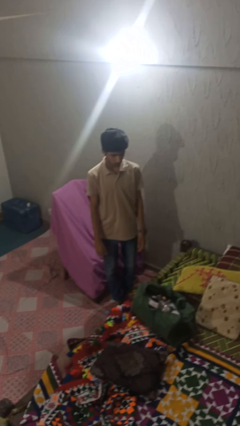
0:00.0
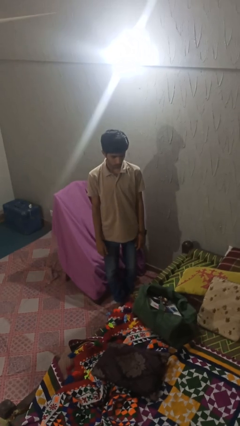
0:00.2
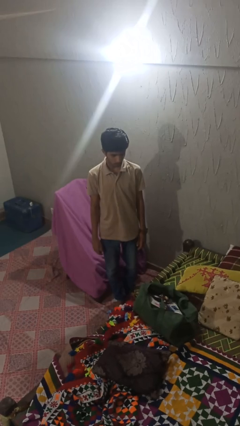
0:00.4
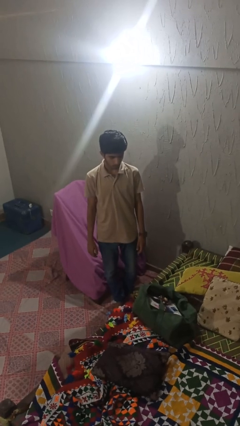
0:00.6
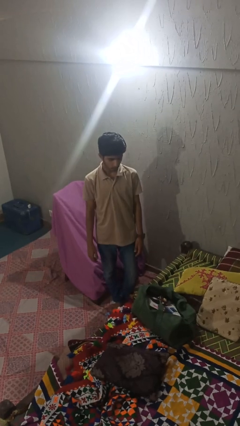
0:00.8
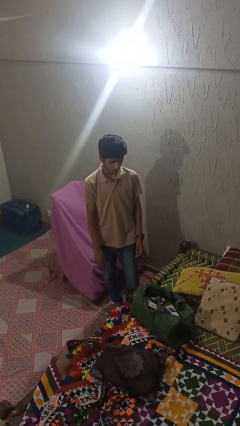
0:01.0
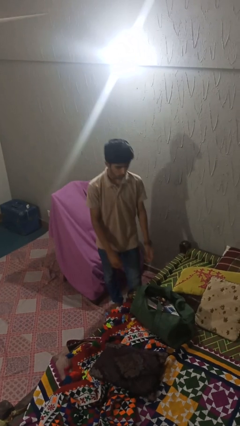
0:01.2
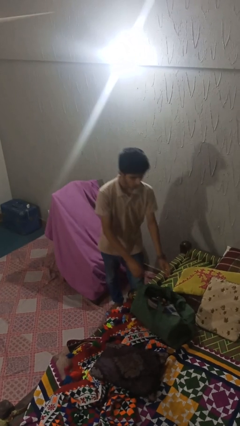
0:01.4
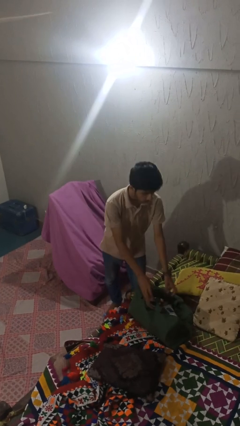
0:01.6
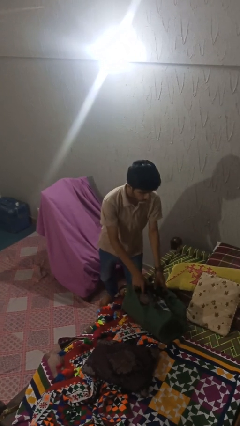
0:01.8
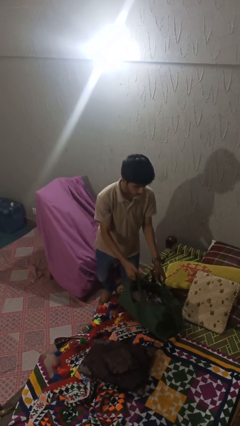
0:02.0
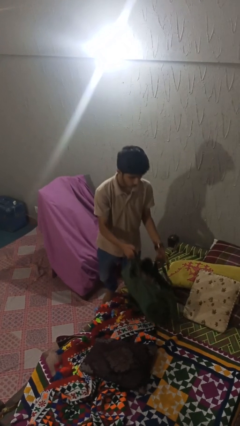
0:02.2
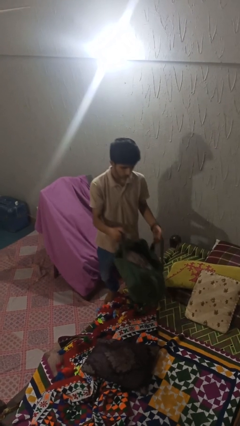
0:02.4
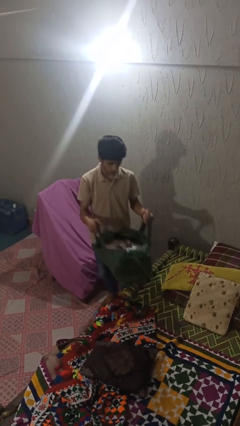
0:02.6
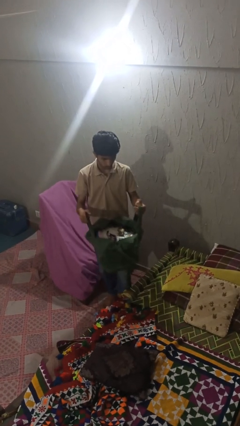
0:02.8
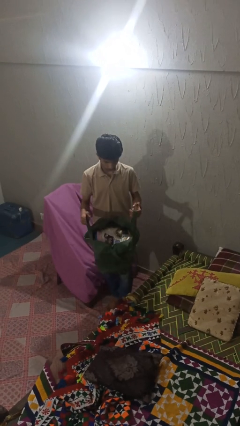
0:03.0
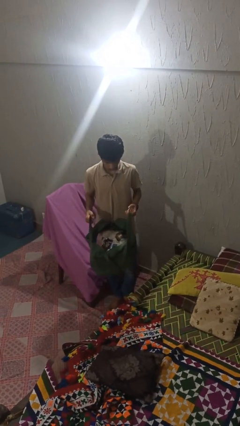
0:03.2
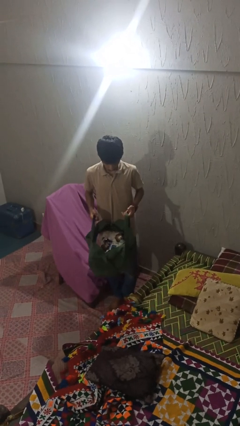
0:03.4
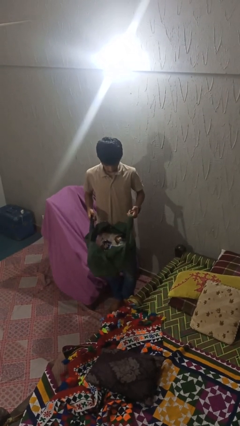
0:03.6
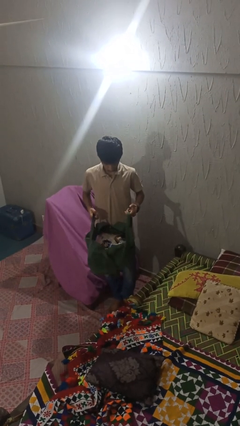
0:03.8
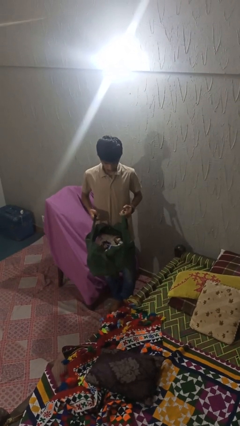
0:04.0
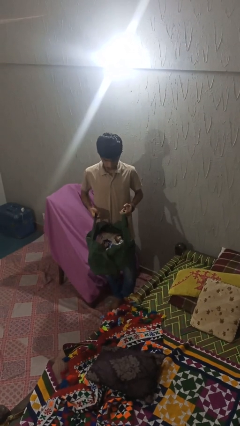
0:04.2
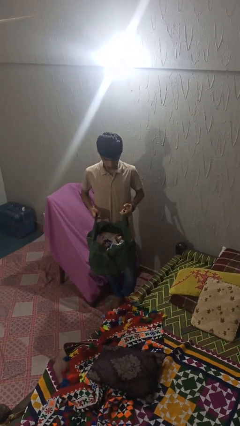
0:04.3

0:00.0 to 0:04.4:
person picks up object from bed

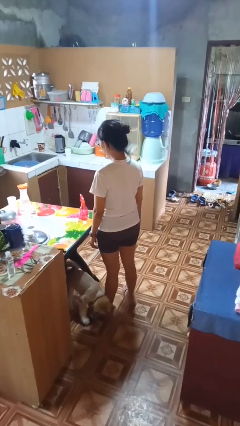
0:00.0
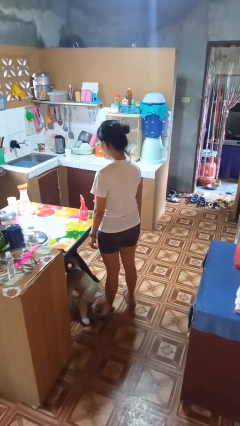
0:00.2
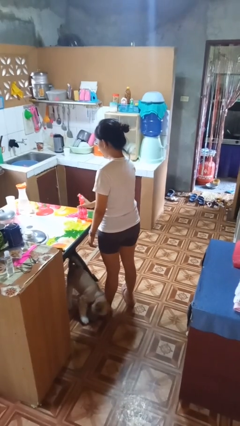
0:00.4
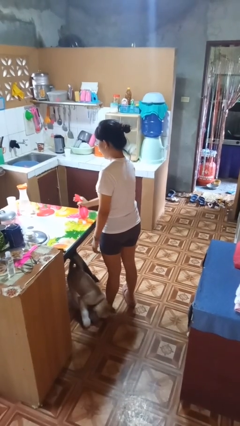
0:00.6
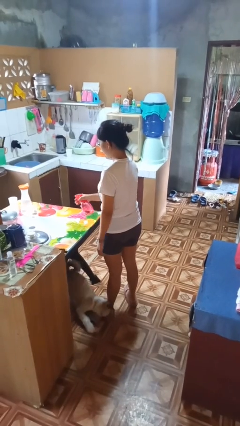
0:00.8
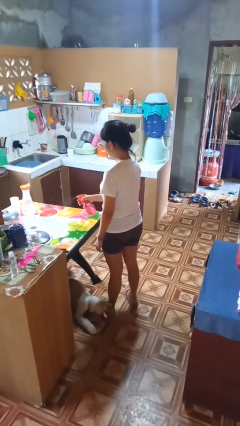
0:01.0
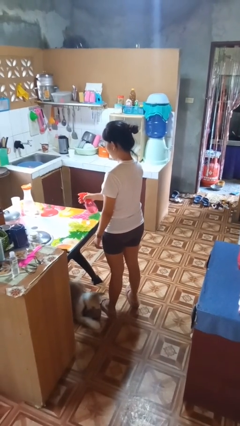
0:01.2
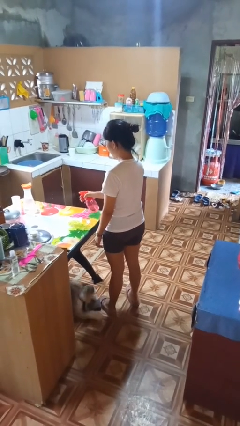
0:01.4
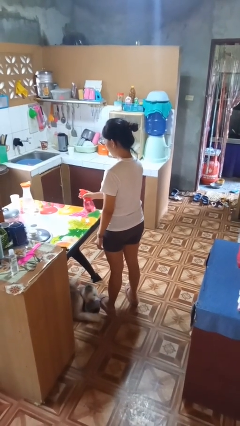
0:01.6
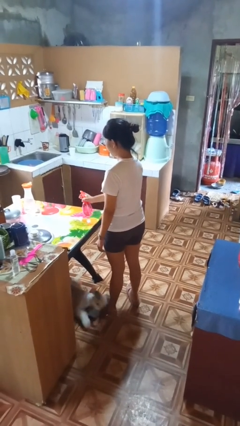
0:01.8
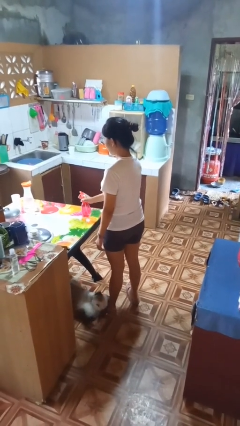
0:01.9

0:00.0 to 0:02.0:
person sprays from bottle

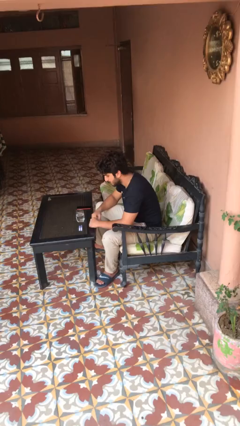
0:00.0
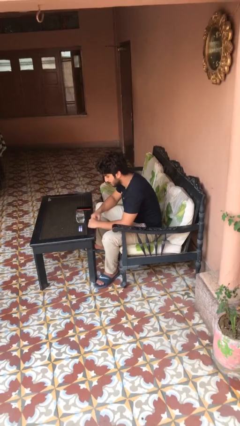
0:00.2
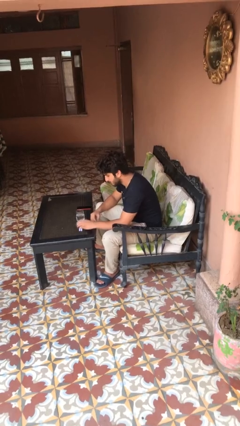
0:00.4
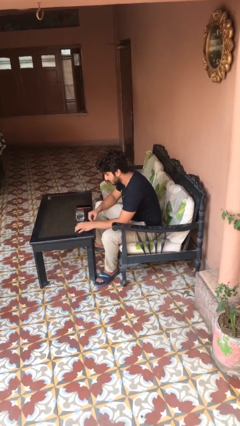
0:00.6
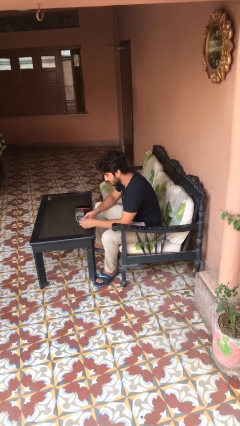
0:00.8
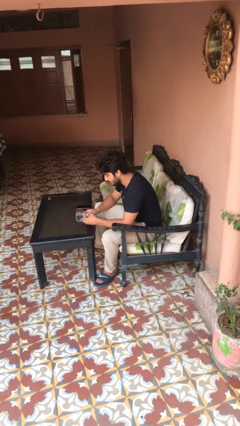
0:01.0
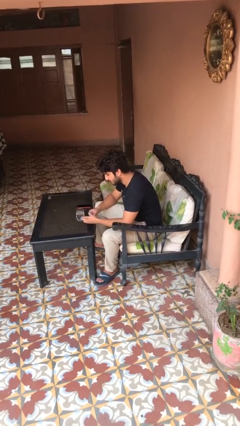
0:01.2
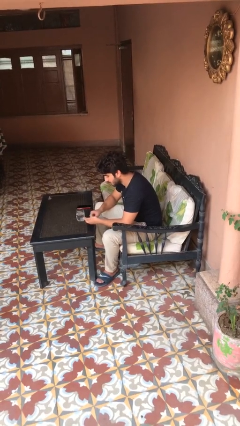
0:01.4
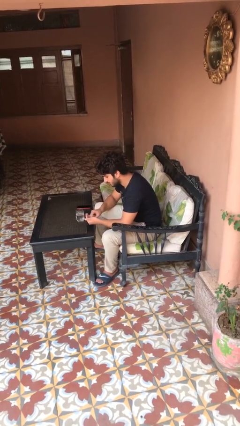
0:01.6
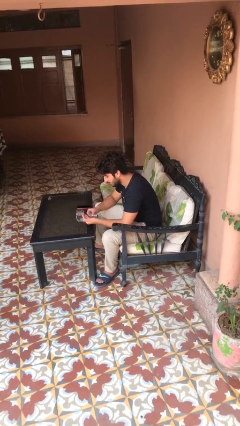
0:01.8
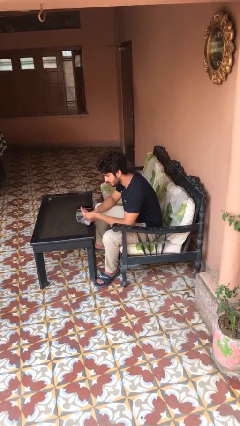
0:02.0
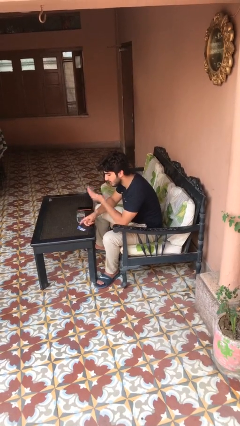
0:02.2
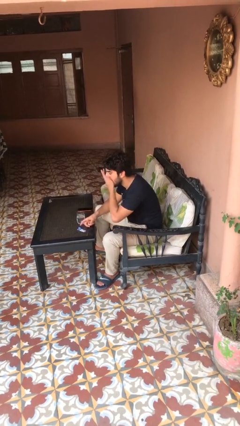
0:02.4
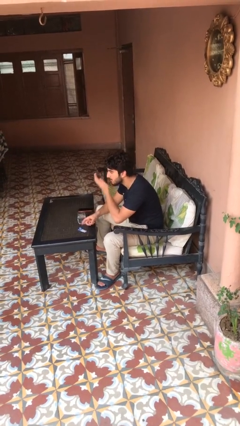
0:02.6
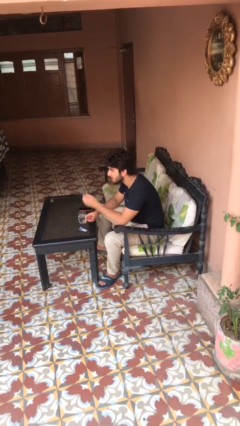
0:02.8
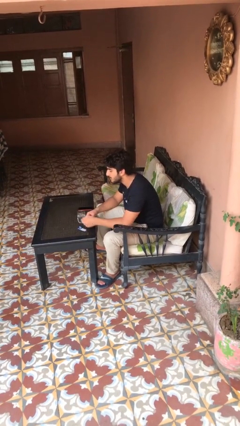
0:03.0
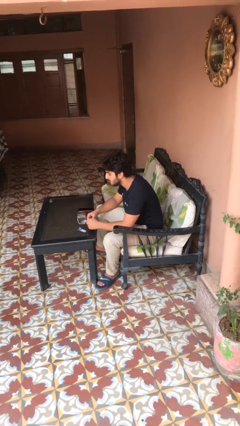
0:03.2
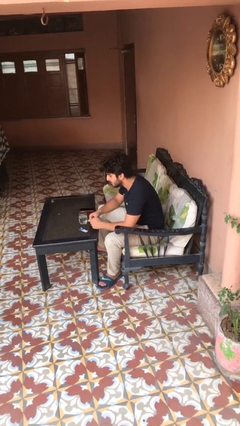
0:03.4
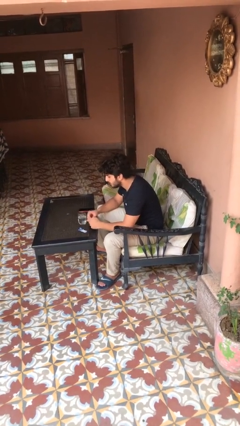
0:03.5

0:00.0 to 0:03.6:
person takes medicine pills

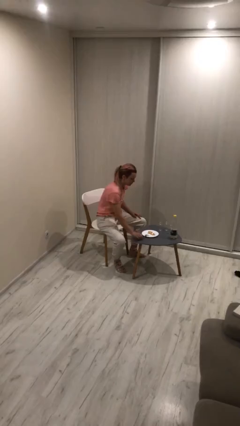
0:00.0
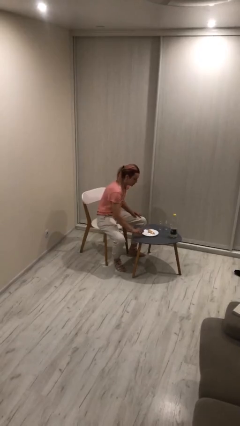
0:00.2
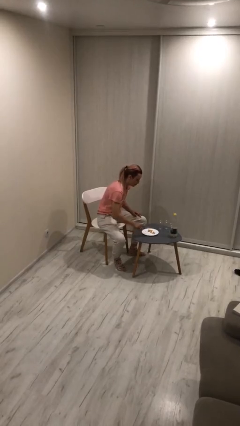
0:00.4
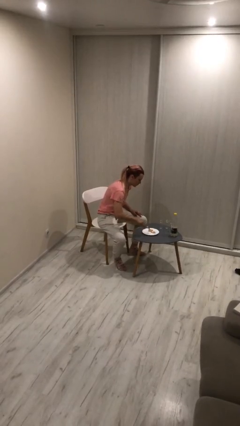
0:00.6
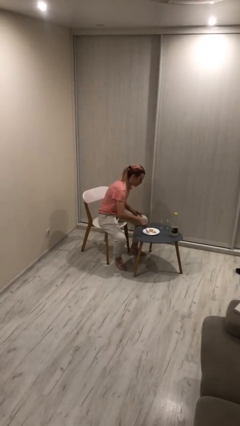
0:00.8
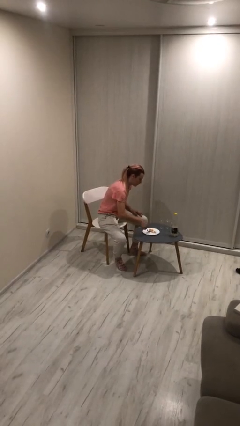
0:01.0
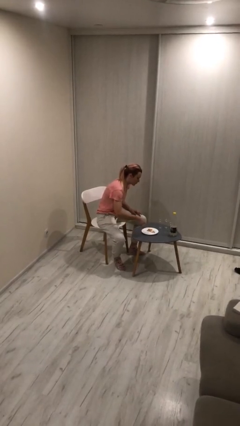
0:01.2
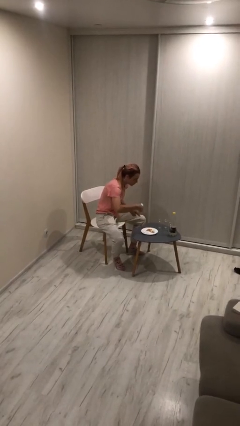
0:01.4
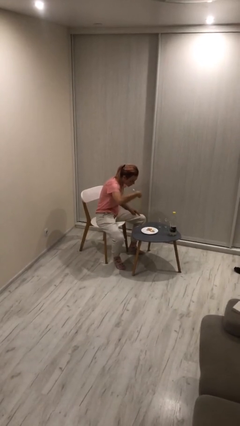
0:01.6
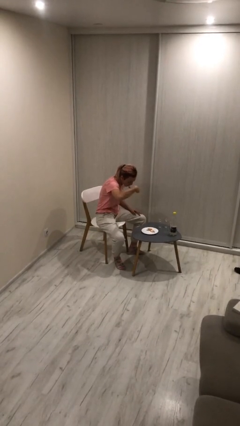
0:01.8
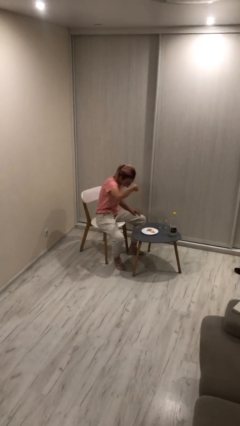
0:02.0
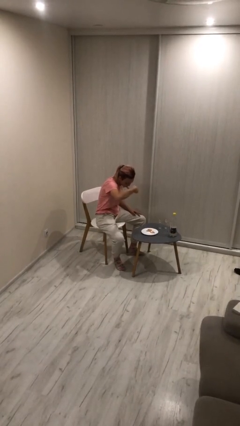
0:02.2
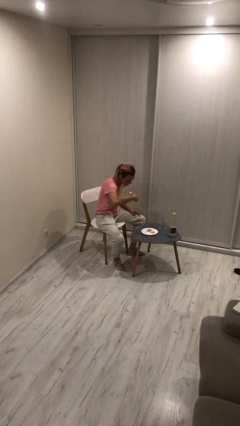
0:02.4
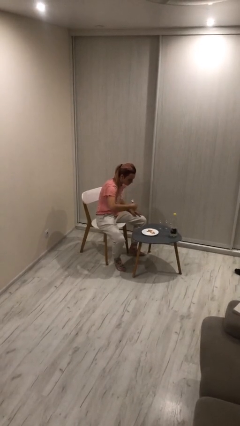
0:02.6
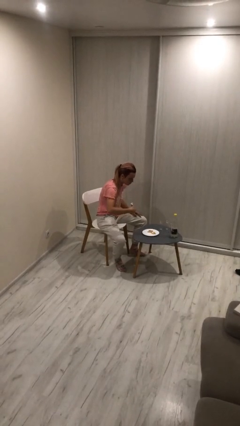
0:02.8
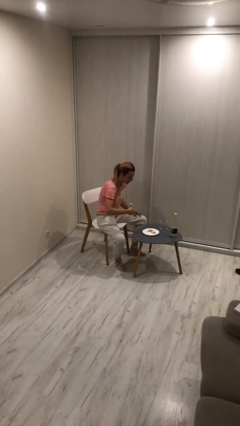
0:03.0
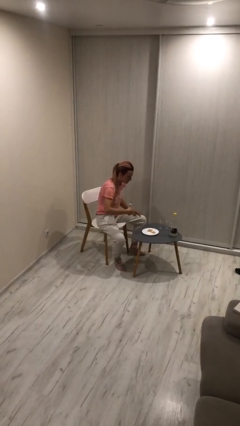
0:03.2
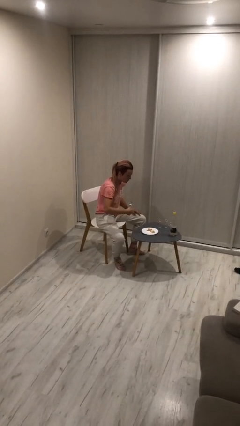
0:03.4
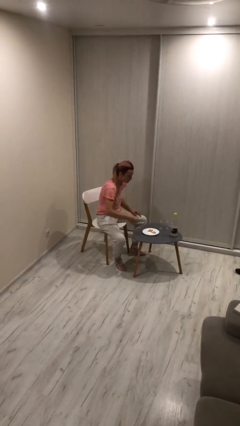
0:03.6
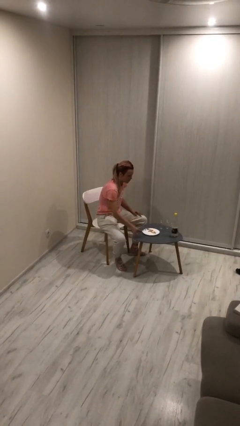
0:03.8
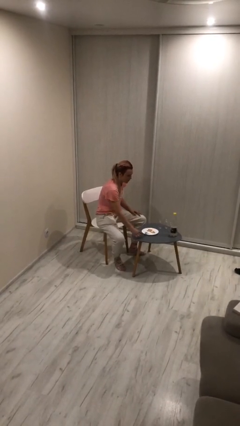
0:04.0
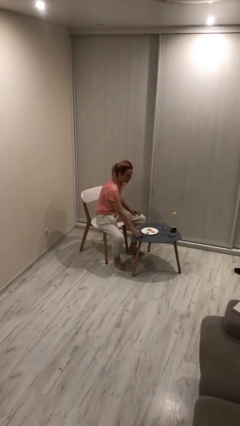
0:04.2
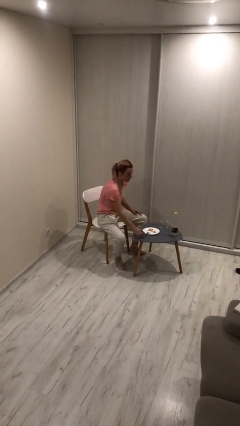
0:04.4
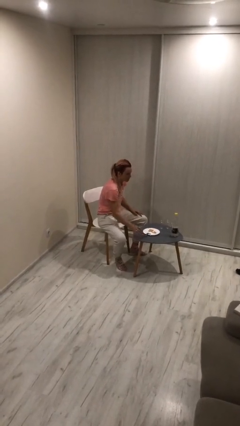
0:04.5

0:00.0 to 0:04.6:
person eats with utensil

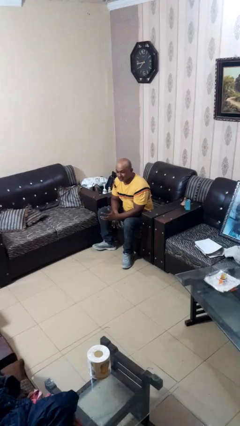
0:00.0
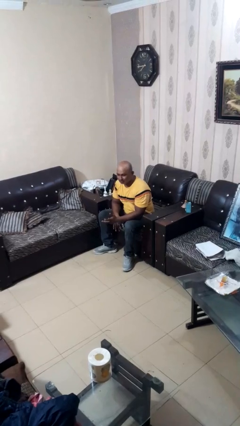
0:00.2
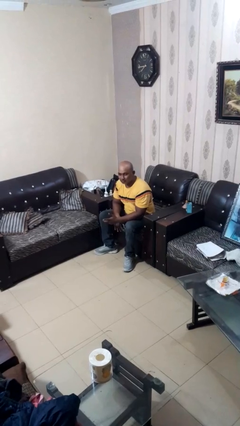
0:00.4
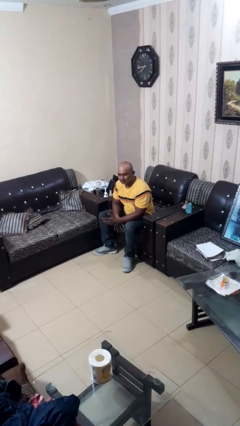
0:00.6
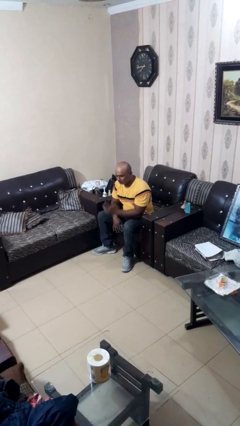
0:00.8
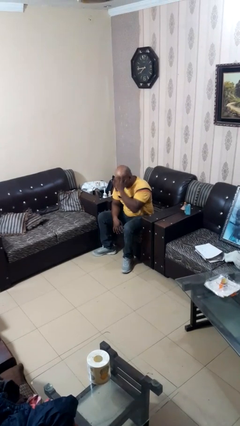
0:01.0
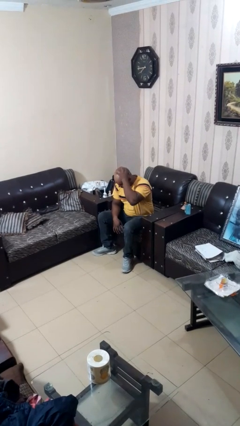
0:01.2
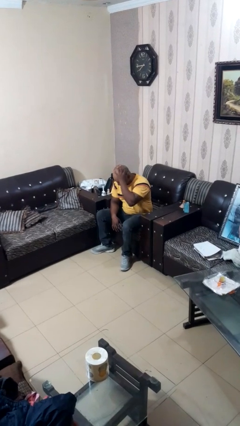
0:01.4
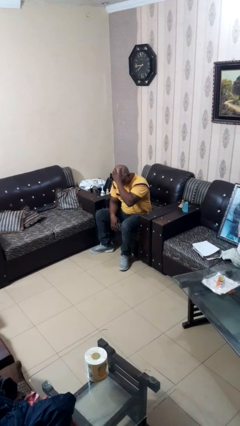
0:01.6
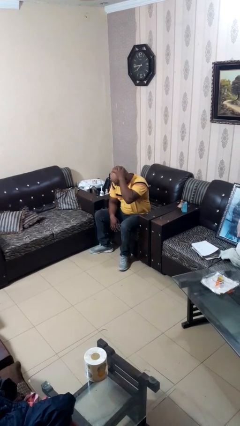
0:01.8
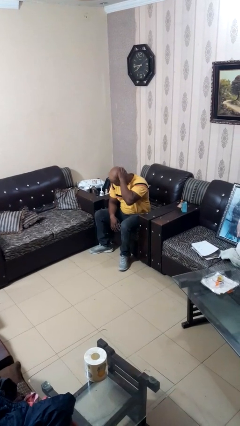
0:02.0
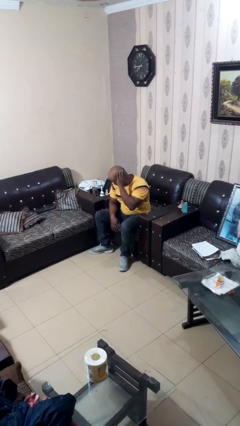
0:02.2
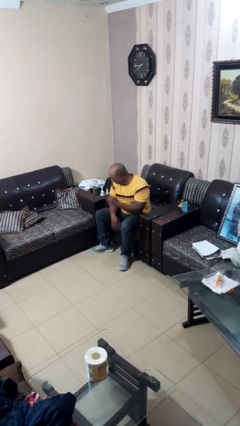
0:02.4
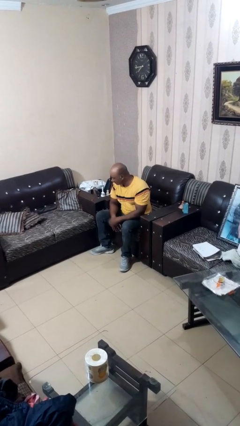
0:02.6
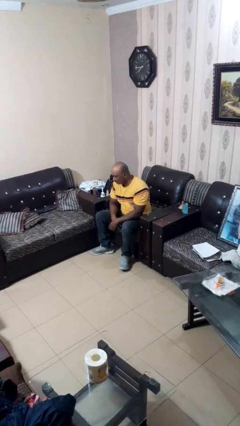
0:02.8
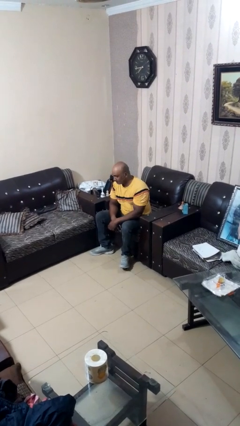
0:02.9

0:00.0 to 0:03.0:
person strokes hair
